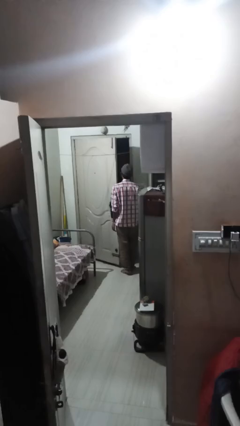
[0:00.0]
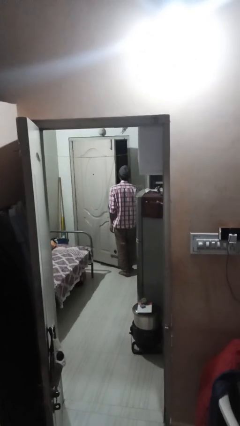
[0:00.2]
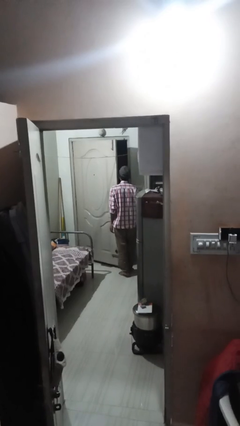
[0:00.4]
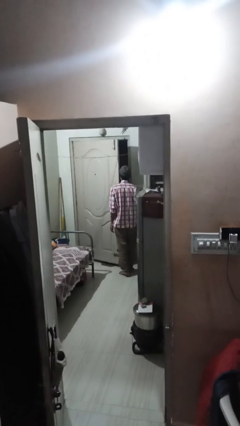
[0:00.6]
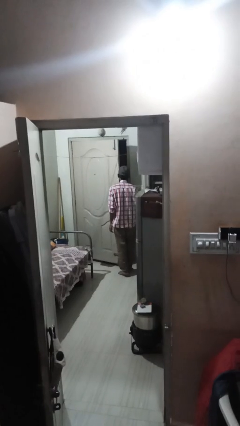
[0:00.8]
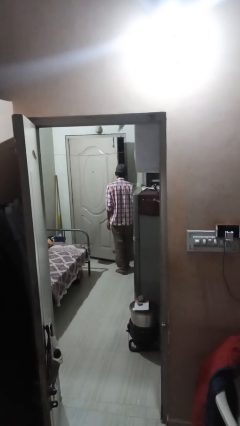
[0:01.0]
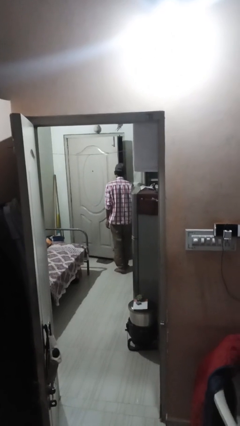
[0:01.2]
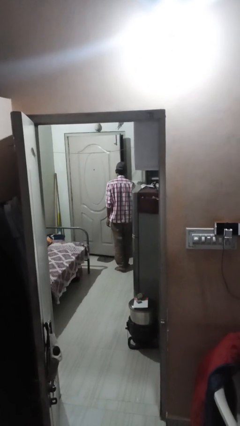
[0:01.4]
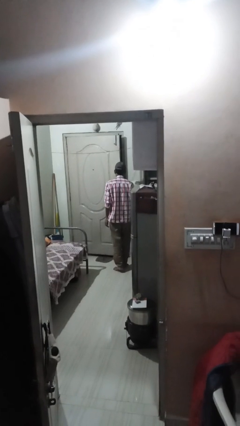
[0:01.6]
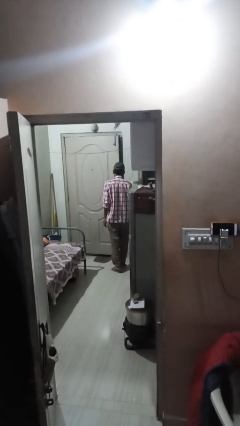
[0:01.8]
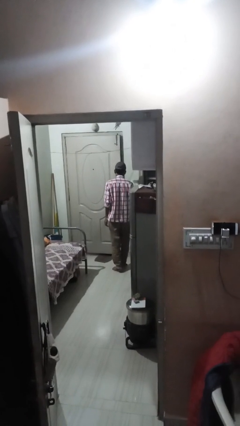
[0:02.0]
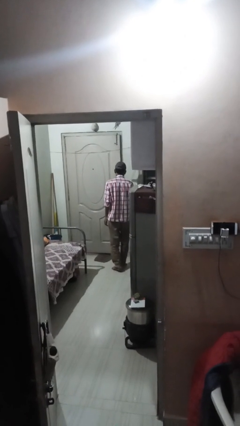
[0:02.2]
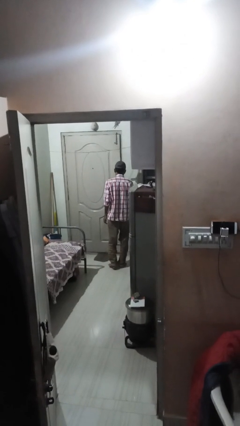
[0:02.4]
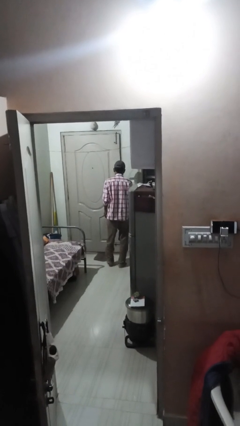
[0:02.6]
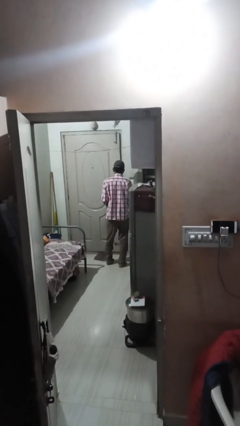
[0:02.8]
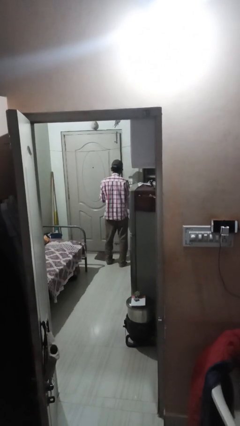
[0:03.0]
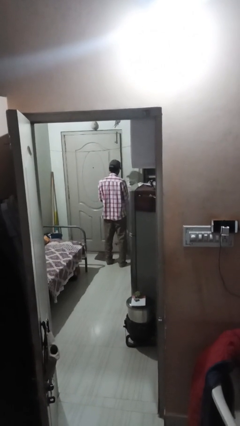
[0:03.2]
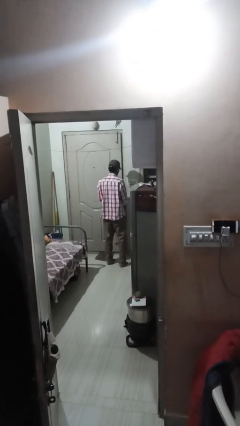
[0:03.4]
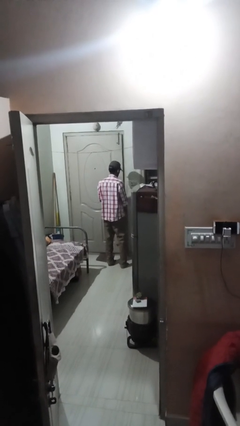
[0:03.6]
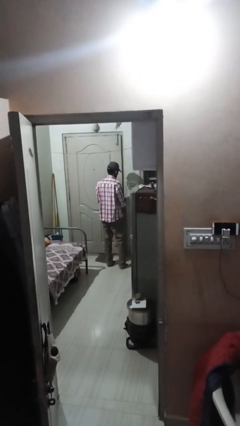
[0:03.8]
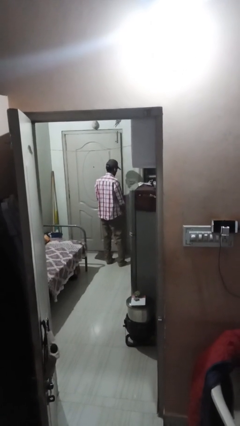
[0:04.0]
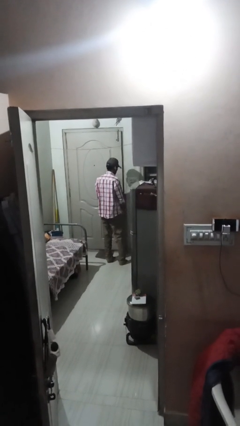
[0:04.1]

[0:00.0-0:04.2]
person closes facility door

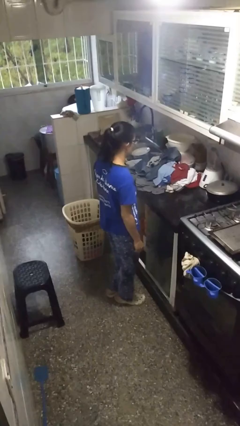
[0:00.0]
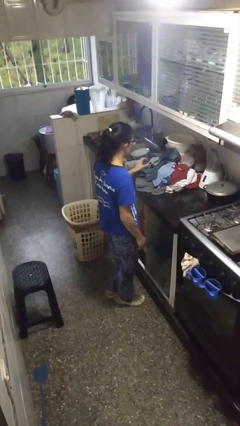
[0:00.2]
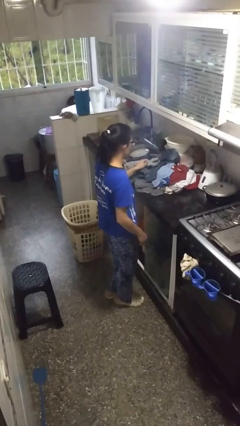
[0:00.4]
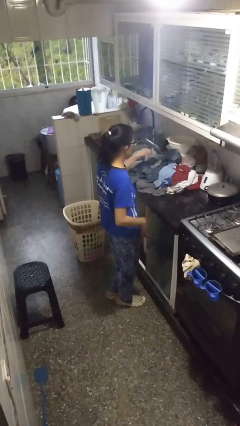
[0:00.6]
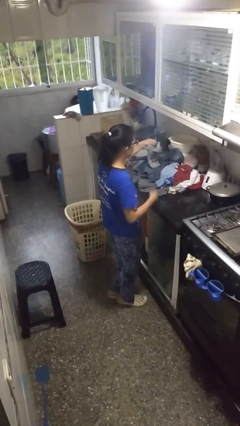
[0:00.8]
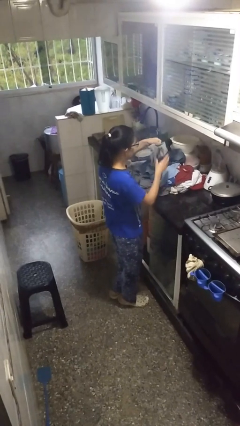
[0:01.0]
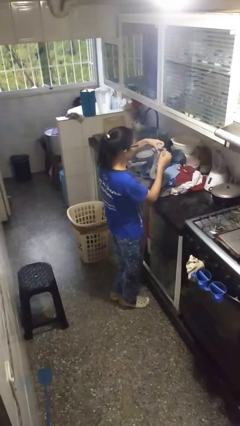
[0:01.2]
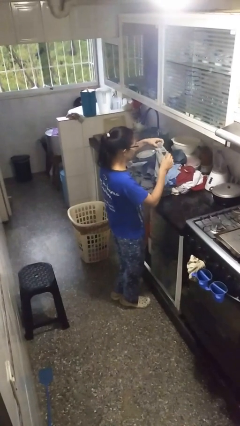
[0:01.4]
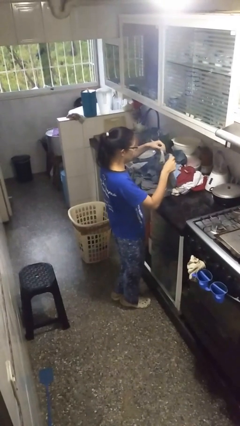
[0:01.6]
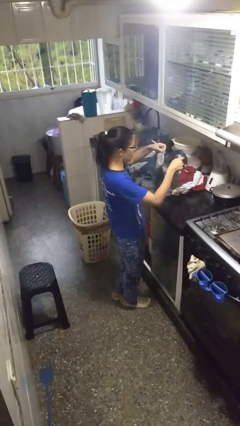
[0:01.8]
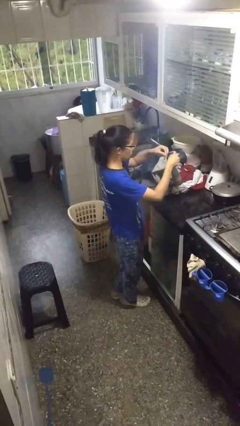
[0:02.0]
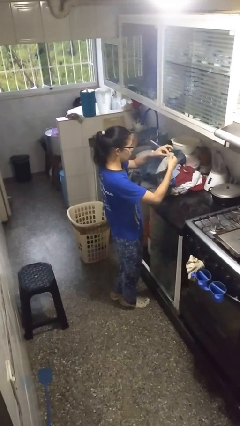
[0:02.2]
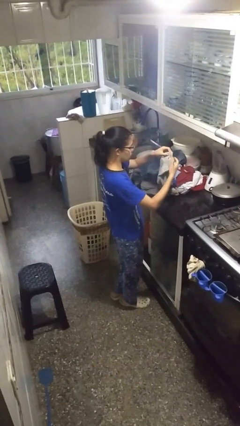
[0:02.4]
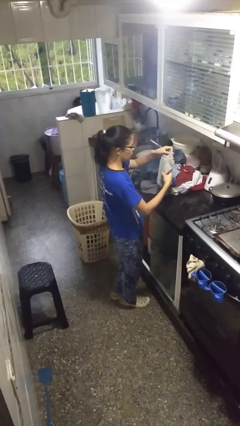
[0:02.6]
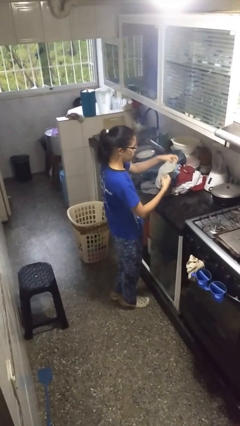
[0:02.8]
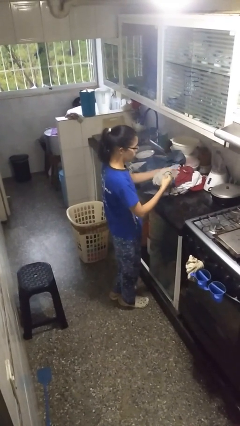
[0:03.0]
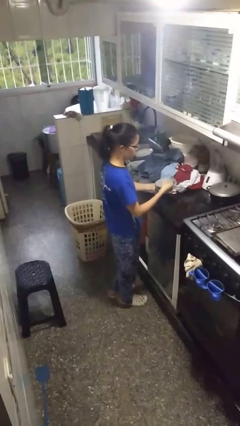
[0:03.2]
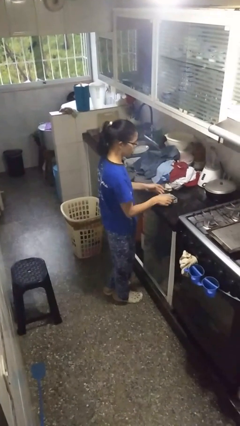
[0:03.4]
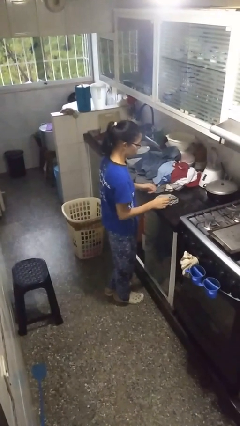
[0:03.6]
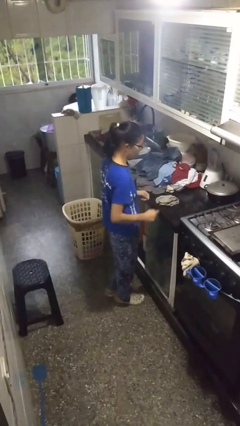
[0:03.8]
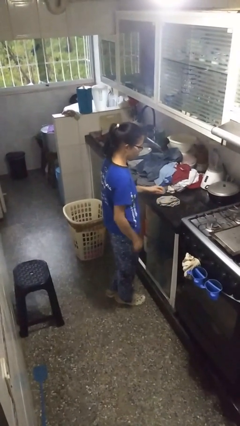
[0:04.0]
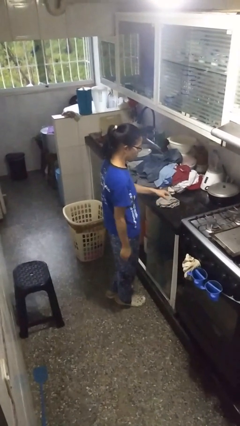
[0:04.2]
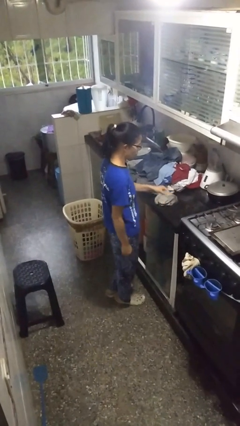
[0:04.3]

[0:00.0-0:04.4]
person folds socks

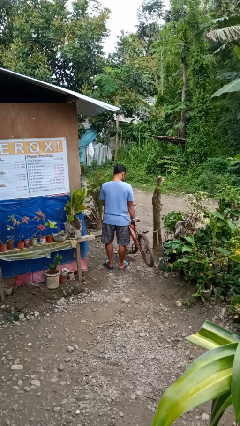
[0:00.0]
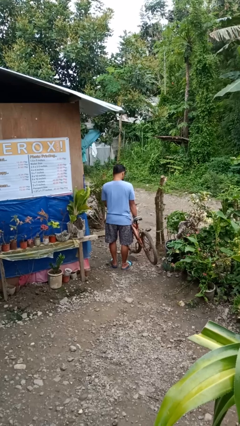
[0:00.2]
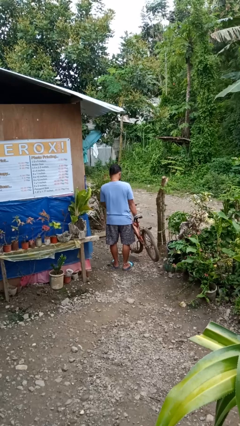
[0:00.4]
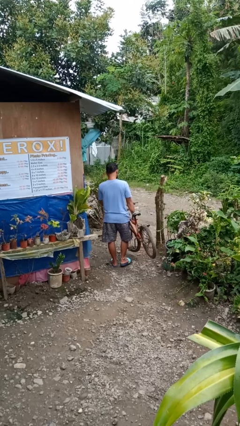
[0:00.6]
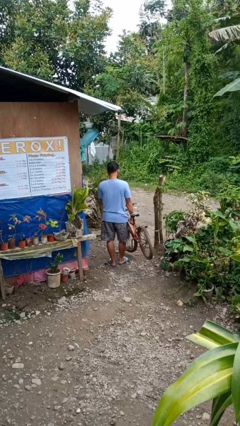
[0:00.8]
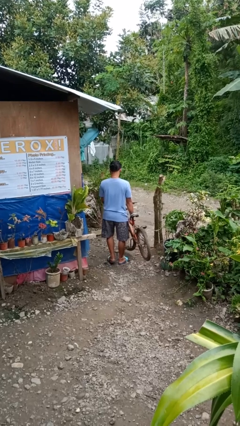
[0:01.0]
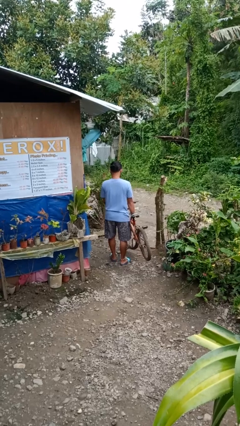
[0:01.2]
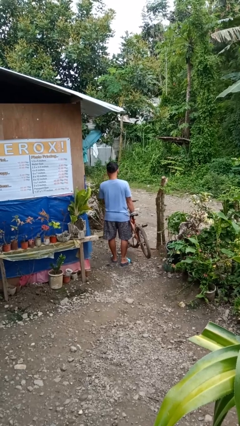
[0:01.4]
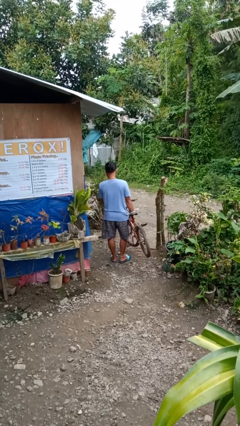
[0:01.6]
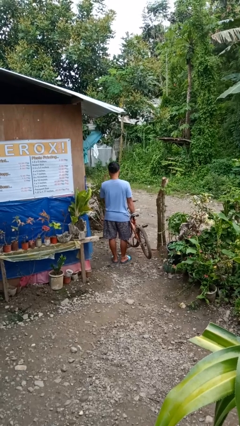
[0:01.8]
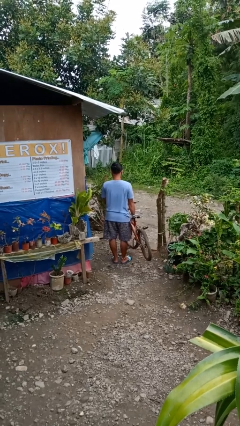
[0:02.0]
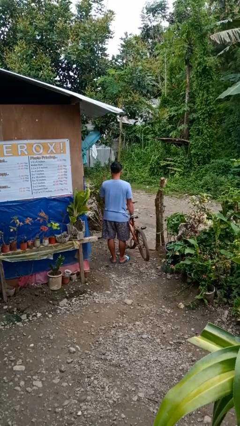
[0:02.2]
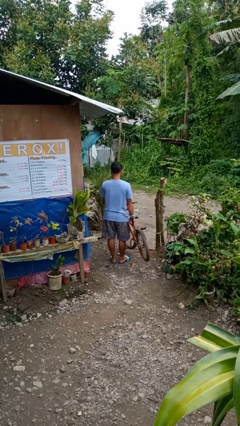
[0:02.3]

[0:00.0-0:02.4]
person carries bicycle

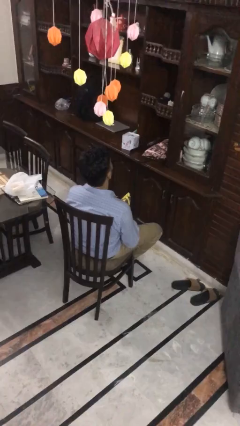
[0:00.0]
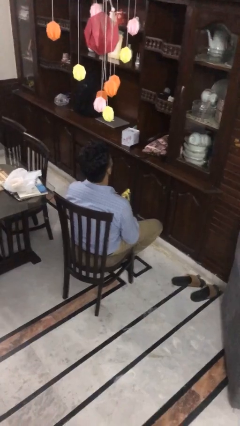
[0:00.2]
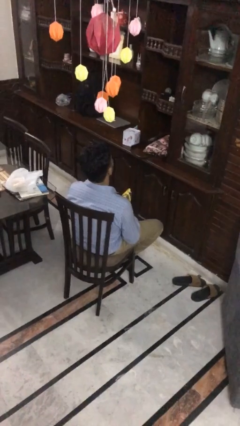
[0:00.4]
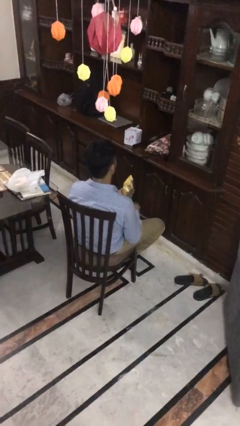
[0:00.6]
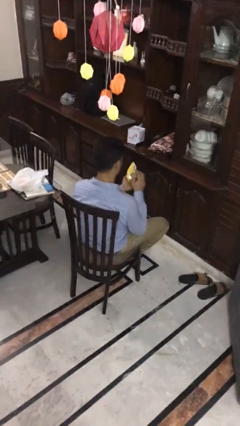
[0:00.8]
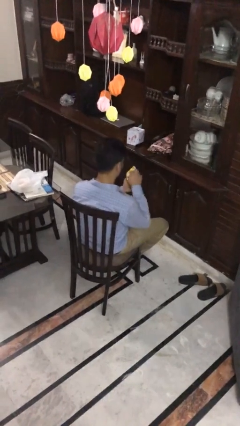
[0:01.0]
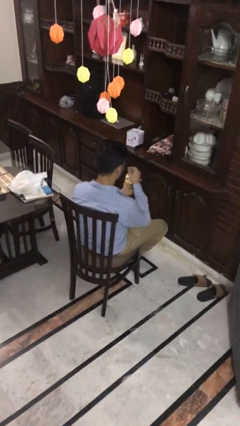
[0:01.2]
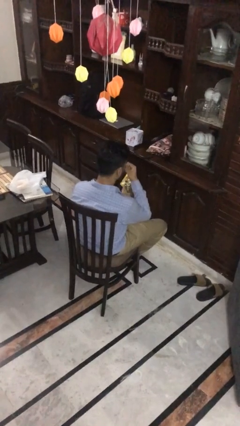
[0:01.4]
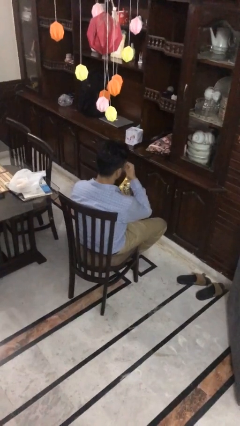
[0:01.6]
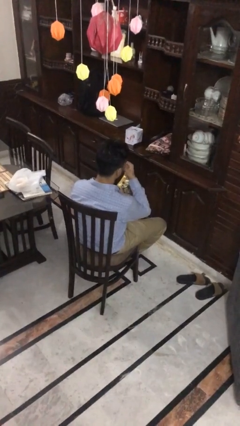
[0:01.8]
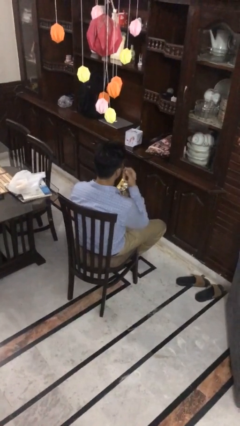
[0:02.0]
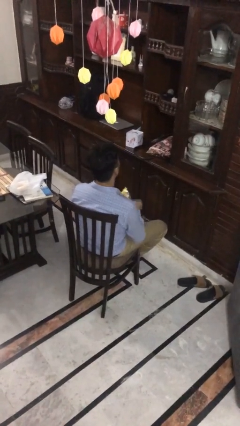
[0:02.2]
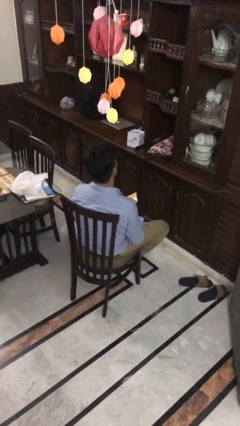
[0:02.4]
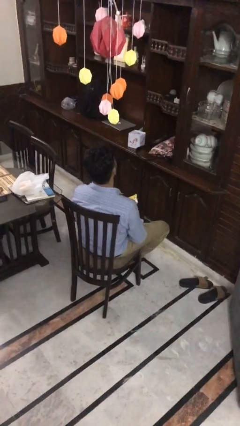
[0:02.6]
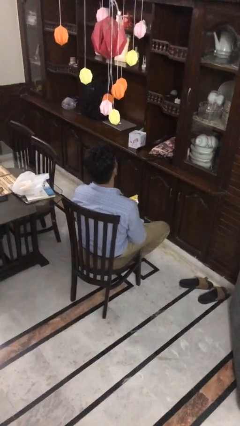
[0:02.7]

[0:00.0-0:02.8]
person eats snack from bag

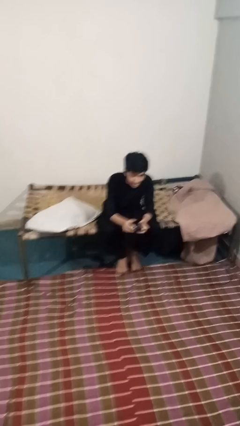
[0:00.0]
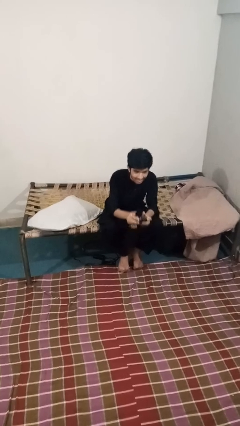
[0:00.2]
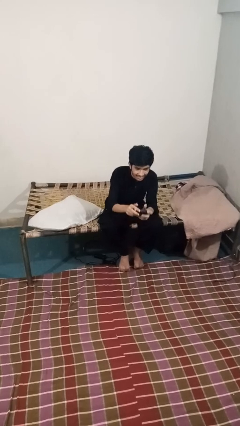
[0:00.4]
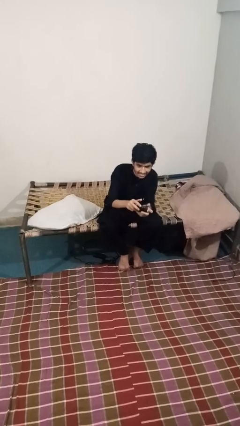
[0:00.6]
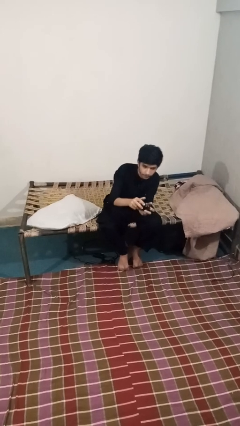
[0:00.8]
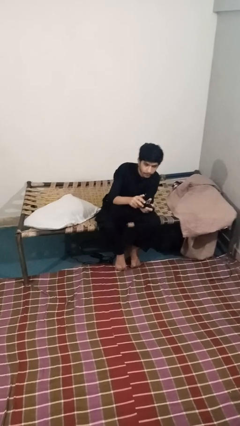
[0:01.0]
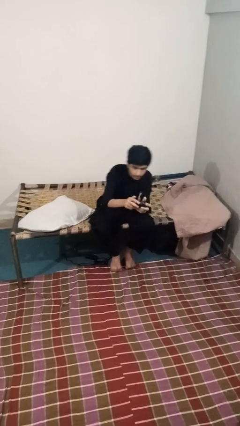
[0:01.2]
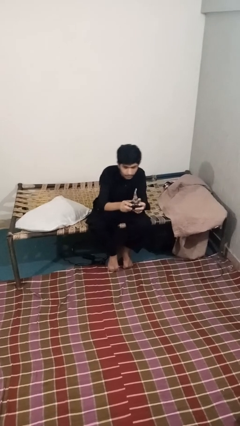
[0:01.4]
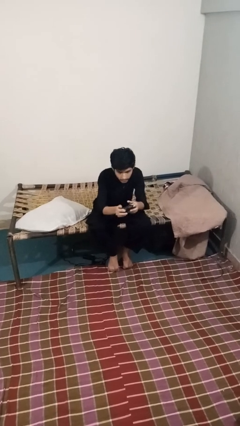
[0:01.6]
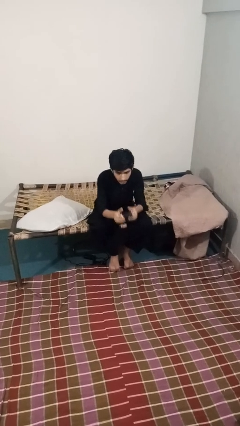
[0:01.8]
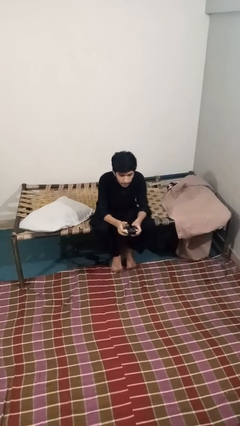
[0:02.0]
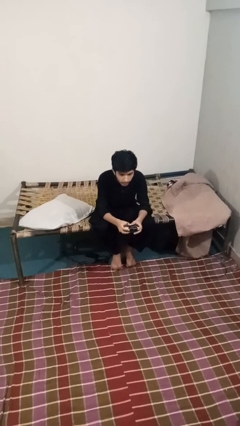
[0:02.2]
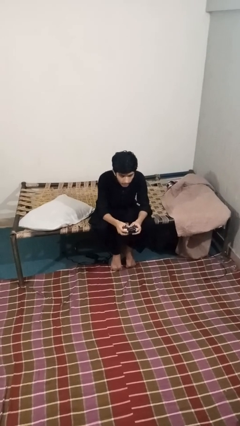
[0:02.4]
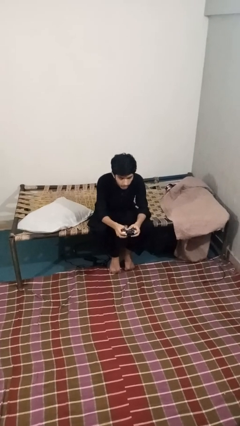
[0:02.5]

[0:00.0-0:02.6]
person interacts with handheld game

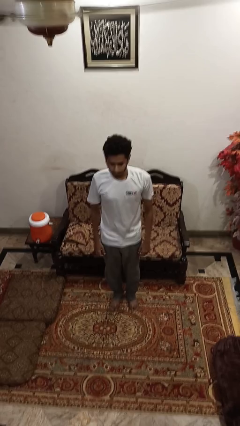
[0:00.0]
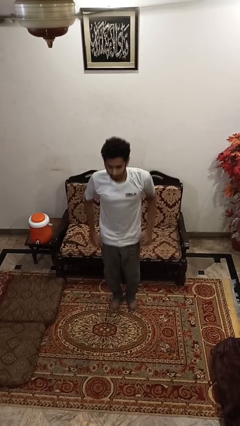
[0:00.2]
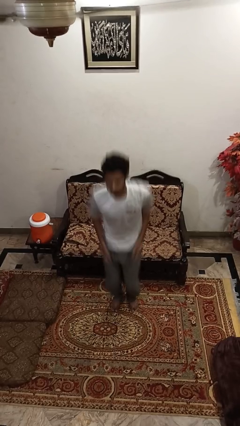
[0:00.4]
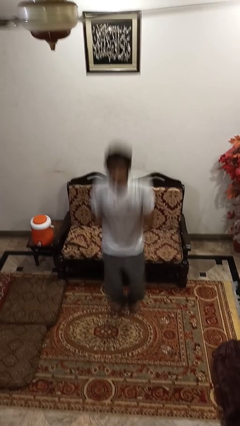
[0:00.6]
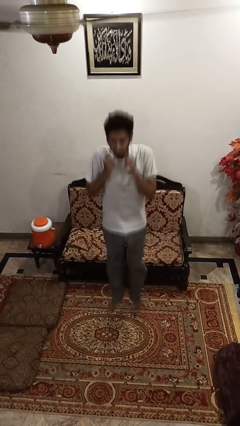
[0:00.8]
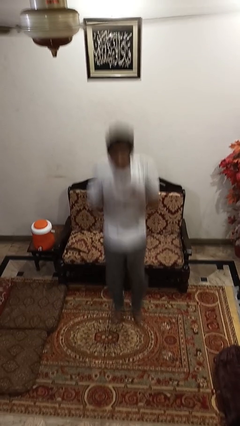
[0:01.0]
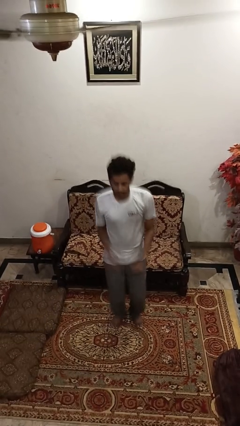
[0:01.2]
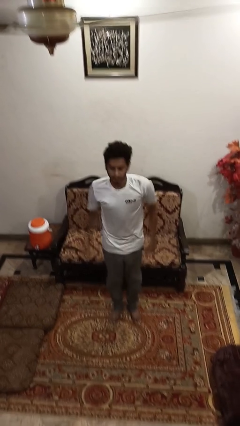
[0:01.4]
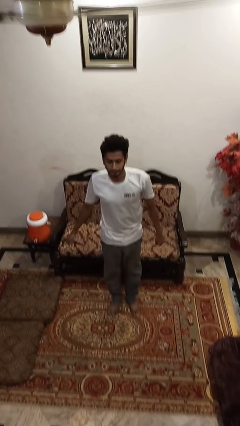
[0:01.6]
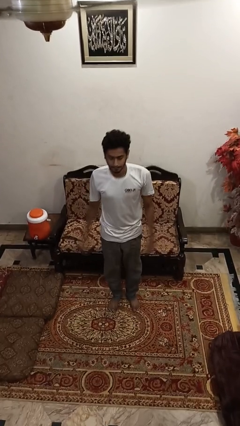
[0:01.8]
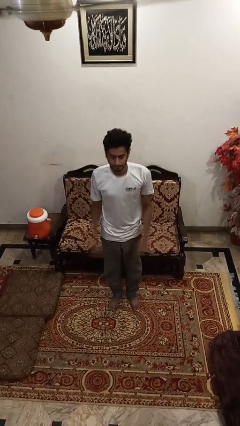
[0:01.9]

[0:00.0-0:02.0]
person jumps
